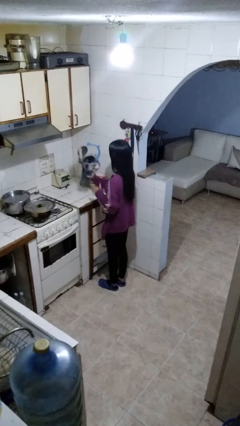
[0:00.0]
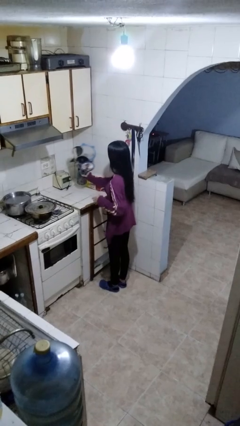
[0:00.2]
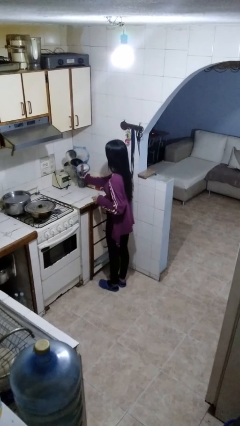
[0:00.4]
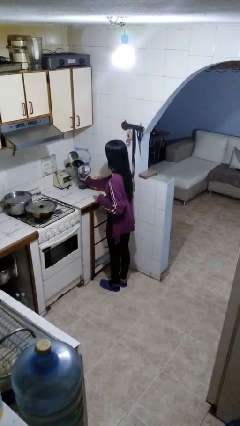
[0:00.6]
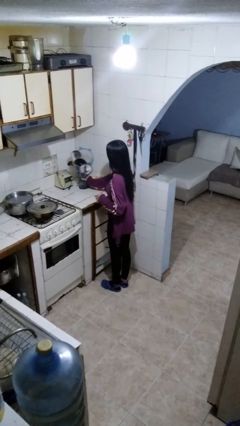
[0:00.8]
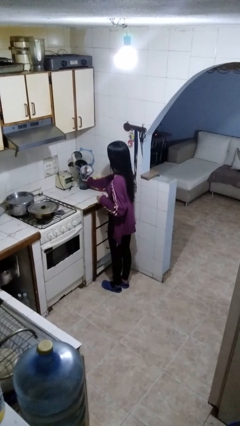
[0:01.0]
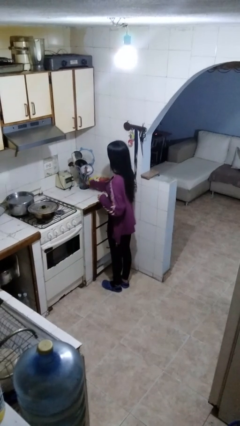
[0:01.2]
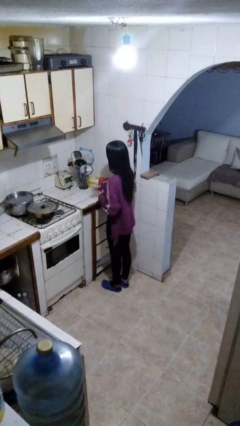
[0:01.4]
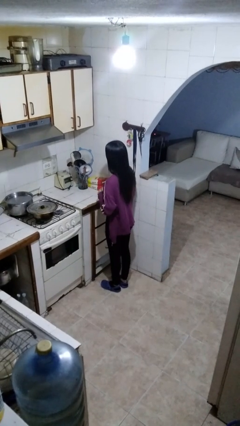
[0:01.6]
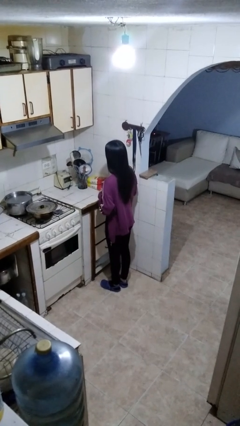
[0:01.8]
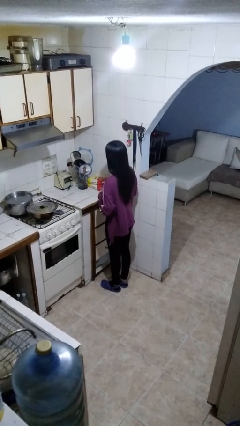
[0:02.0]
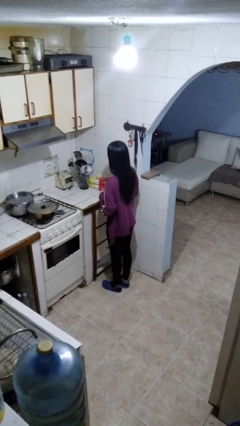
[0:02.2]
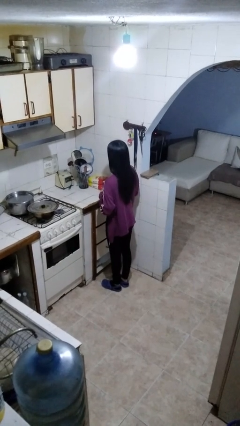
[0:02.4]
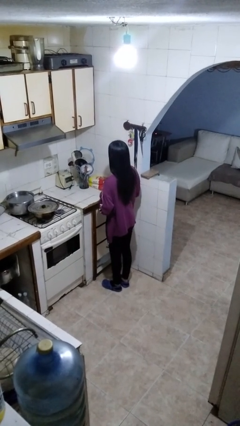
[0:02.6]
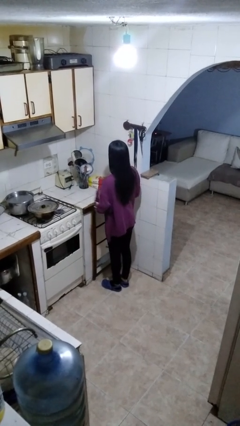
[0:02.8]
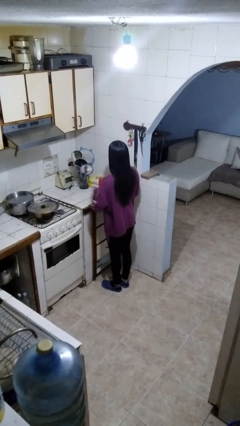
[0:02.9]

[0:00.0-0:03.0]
person picks up object from countertop

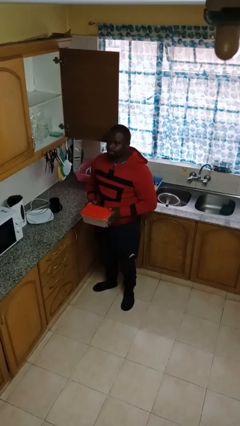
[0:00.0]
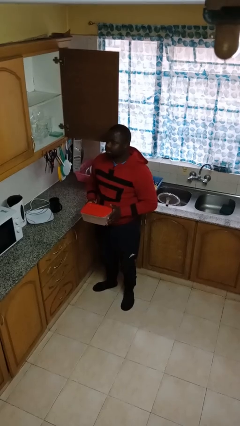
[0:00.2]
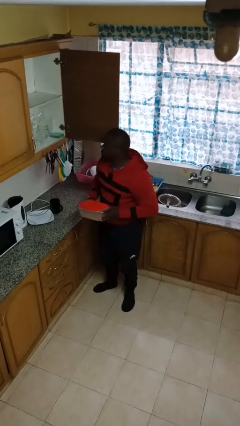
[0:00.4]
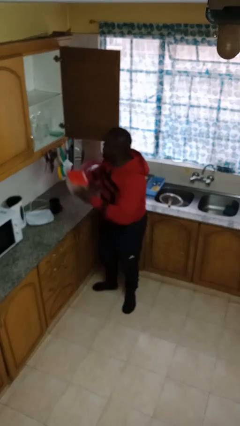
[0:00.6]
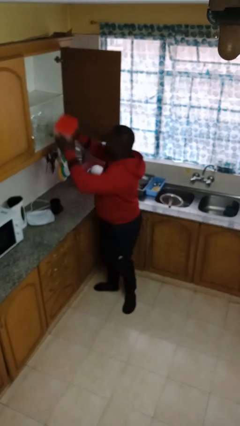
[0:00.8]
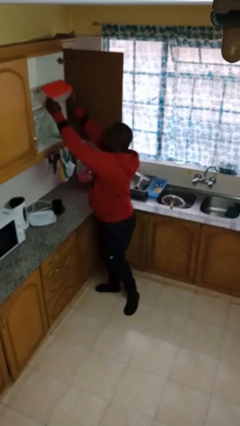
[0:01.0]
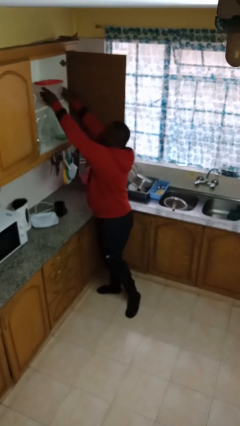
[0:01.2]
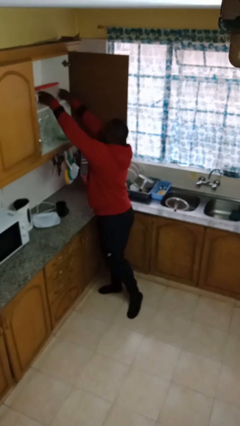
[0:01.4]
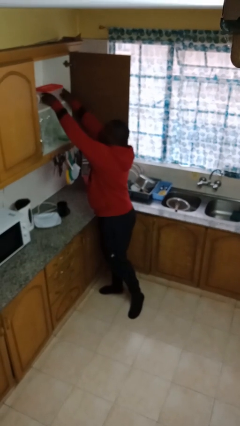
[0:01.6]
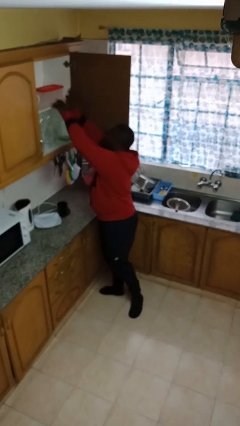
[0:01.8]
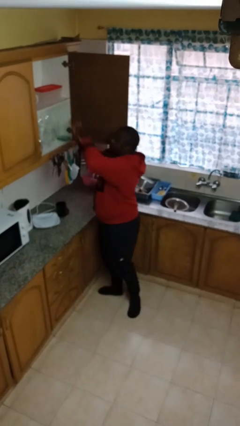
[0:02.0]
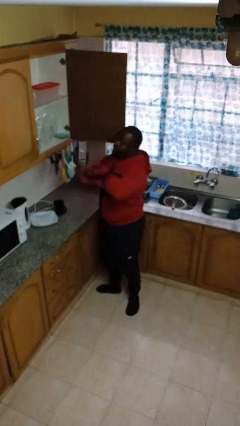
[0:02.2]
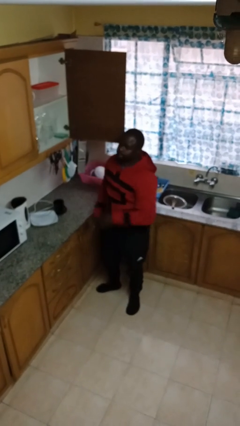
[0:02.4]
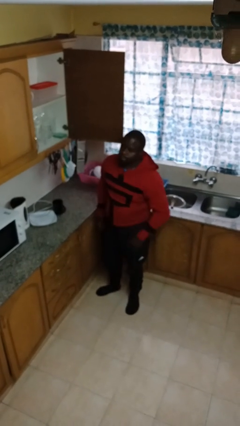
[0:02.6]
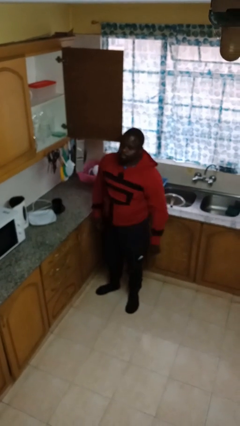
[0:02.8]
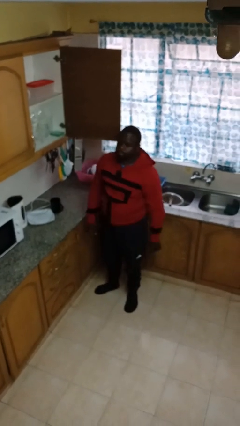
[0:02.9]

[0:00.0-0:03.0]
person puts down object into cabinet

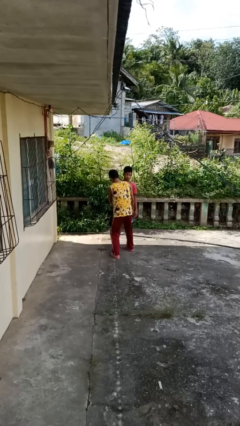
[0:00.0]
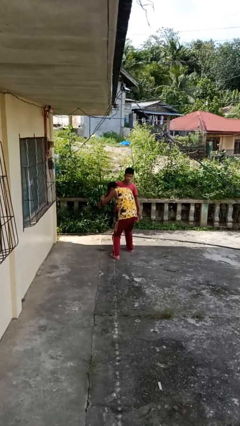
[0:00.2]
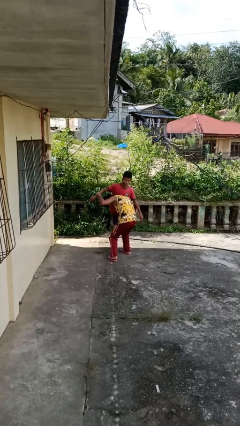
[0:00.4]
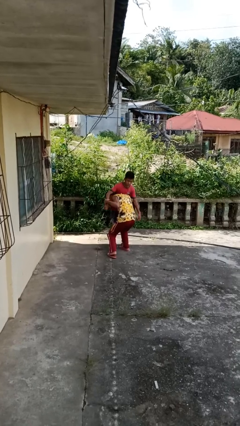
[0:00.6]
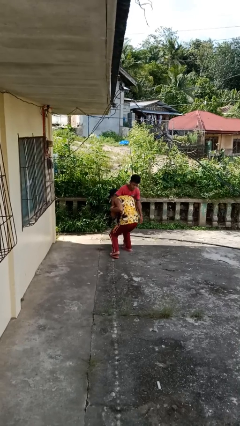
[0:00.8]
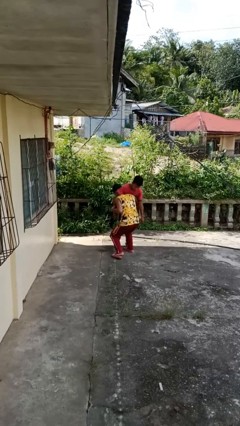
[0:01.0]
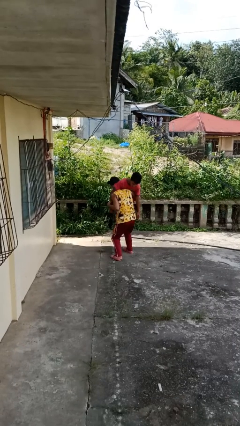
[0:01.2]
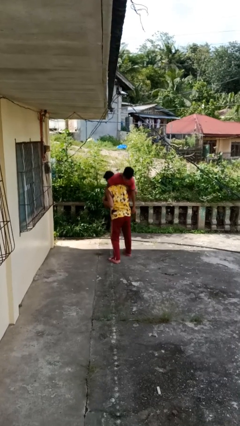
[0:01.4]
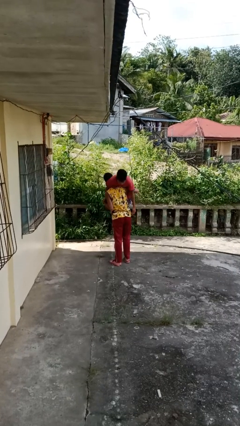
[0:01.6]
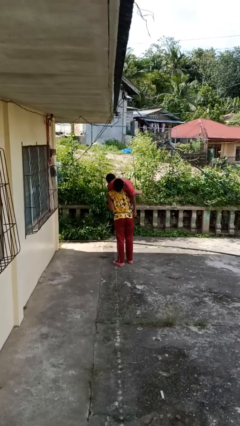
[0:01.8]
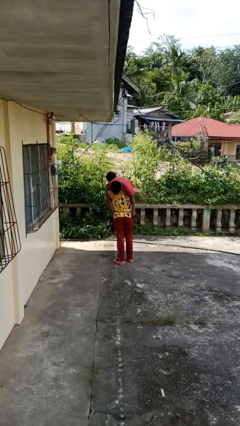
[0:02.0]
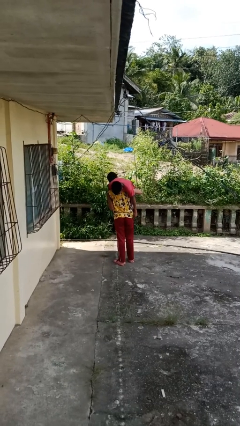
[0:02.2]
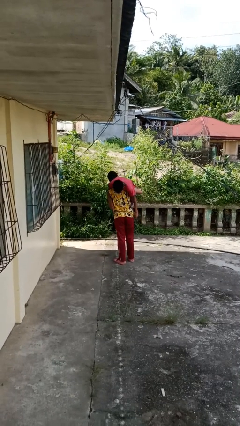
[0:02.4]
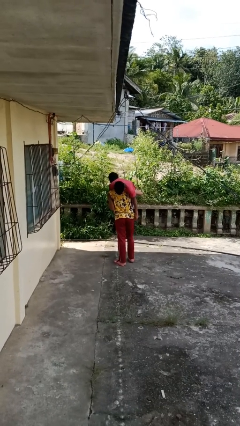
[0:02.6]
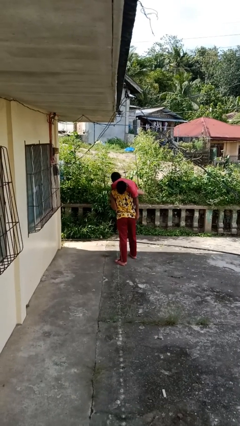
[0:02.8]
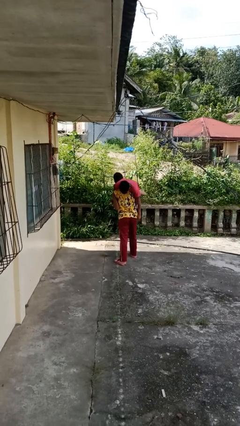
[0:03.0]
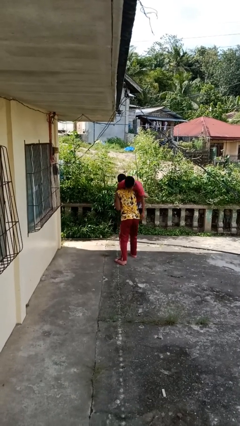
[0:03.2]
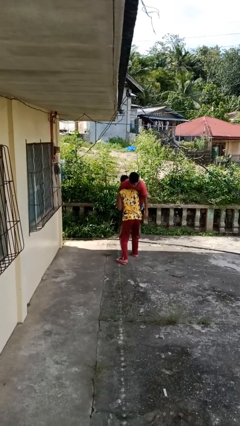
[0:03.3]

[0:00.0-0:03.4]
person carries person over shoulder

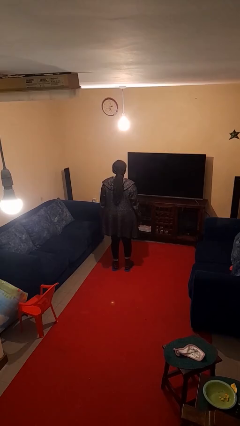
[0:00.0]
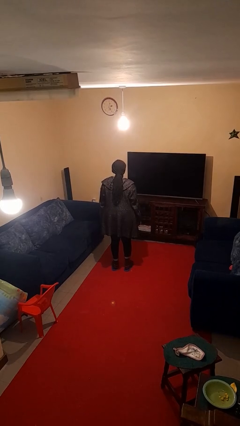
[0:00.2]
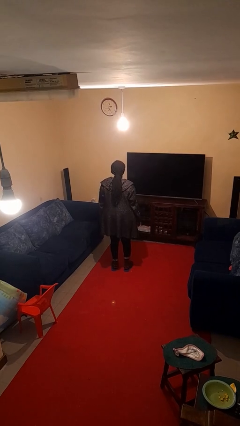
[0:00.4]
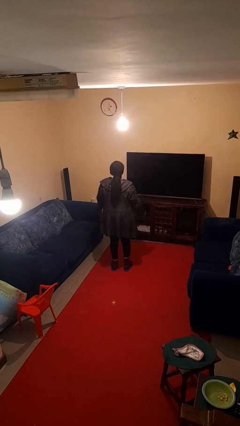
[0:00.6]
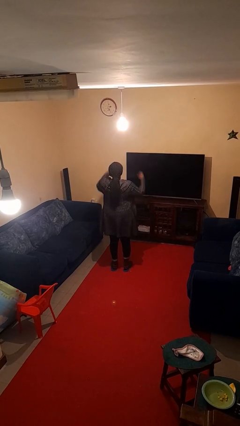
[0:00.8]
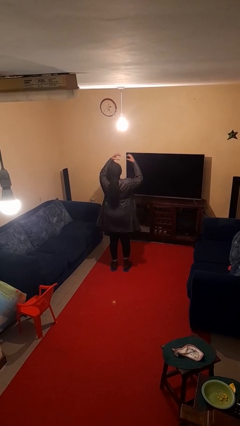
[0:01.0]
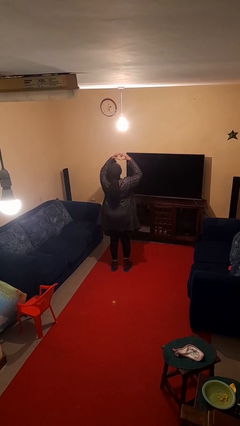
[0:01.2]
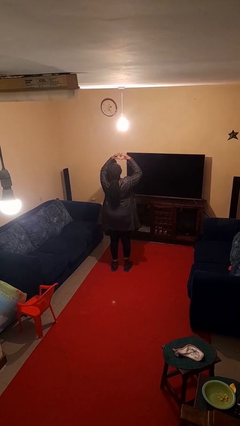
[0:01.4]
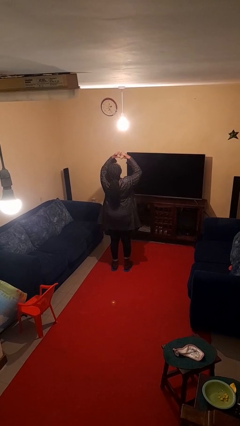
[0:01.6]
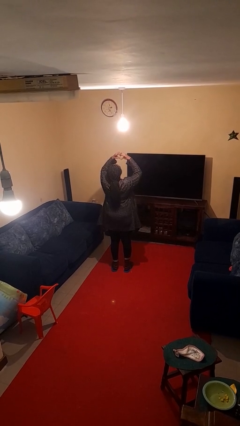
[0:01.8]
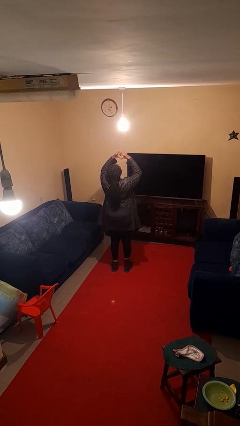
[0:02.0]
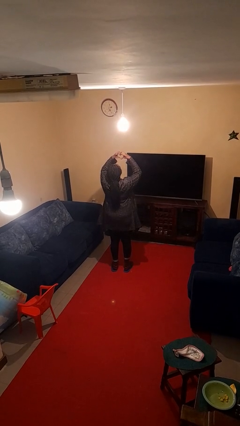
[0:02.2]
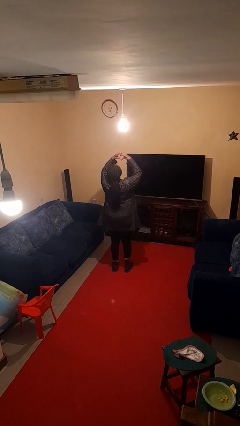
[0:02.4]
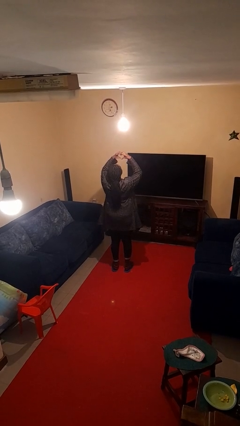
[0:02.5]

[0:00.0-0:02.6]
person gestures heart

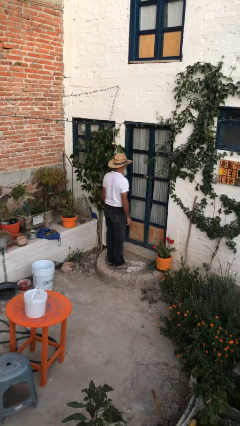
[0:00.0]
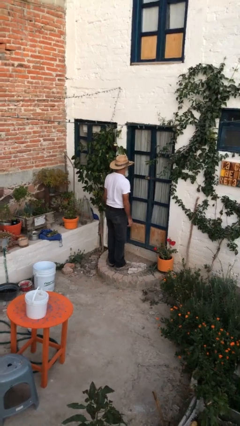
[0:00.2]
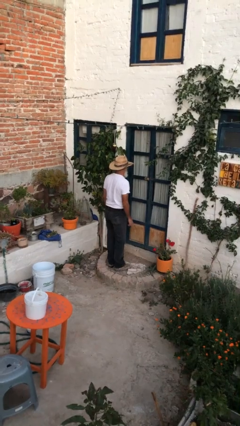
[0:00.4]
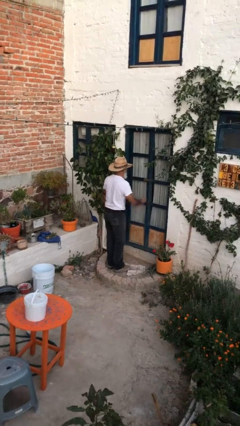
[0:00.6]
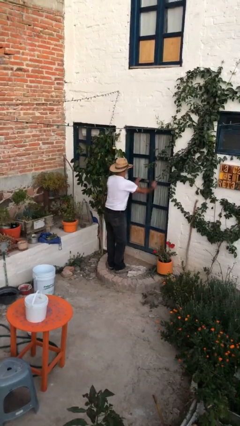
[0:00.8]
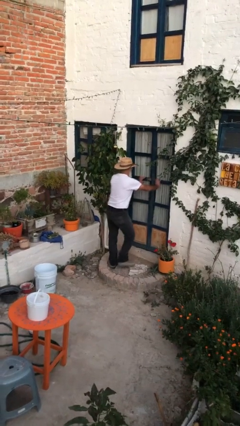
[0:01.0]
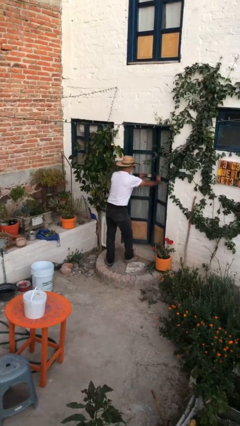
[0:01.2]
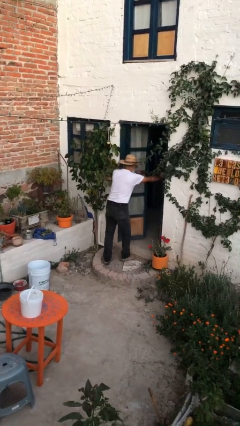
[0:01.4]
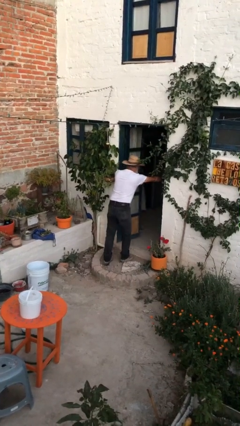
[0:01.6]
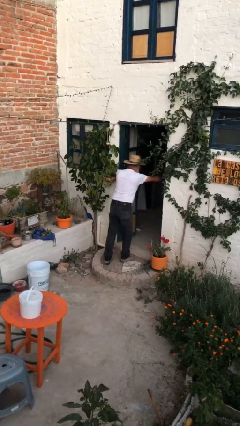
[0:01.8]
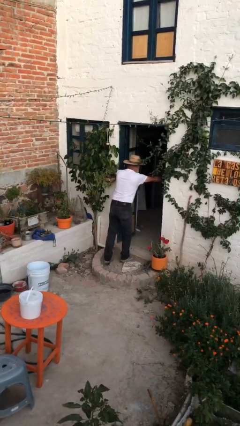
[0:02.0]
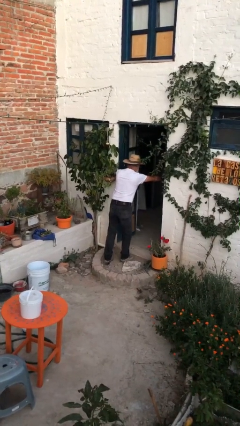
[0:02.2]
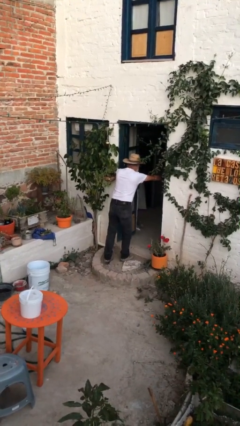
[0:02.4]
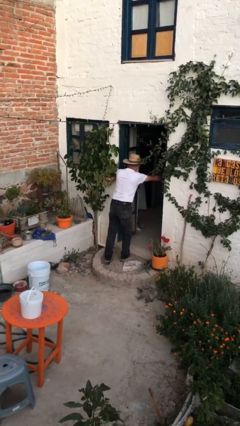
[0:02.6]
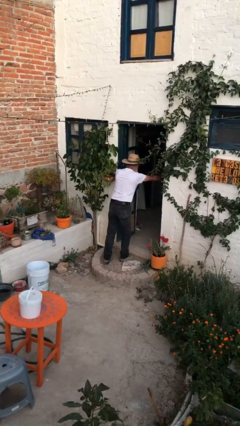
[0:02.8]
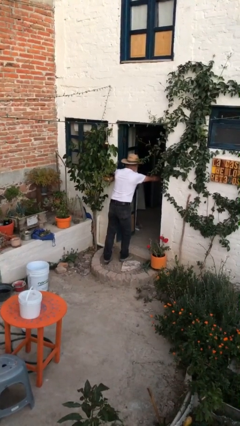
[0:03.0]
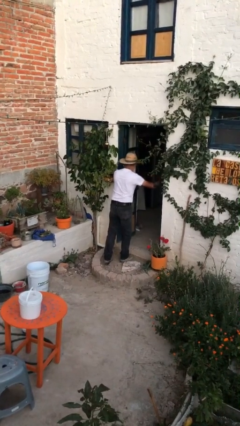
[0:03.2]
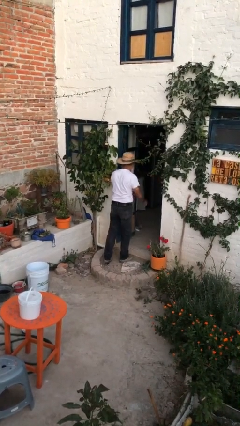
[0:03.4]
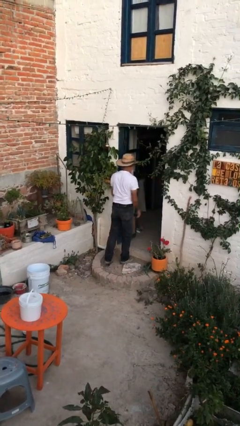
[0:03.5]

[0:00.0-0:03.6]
person opens facility door

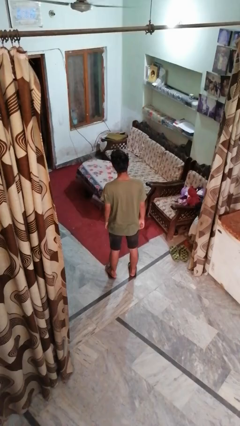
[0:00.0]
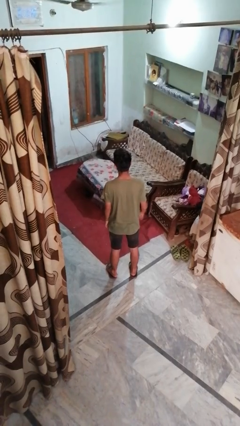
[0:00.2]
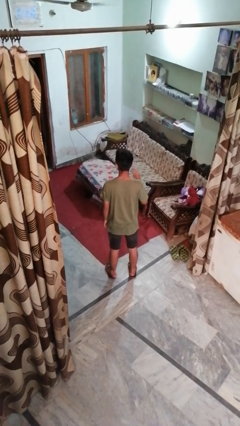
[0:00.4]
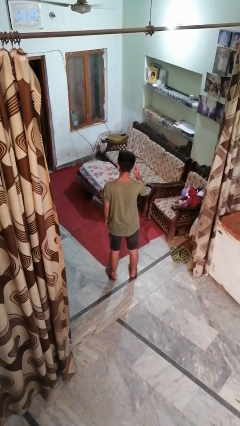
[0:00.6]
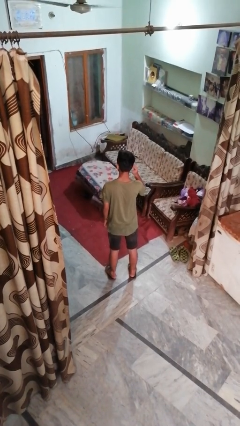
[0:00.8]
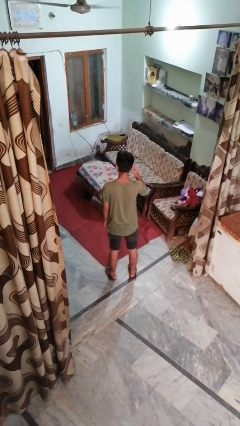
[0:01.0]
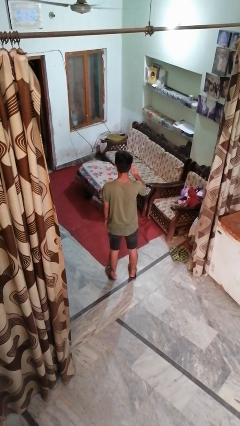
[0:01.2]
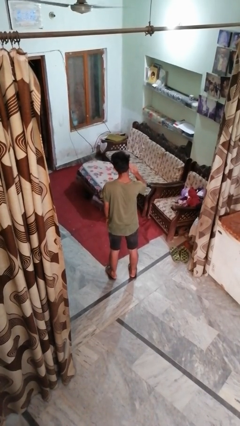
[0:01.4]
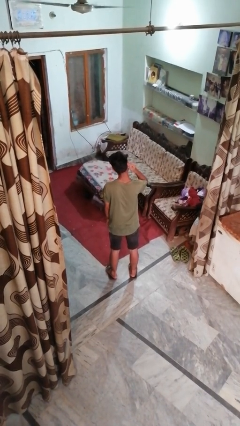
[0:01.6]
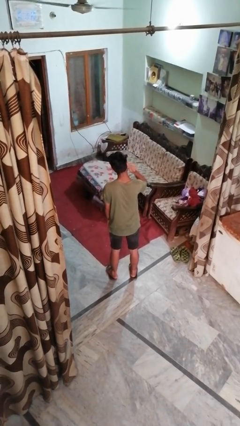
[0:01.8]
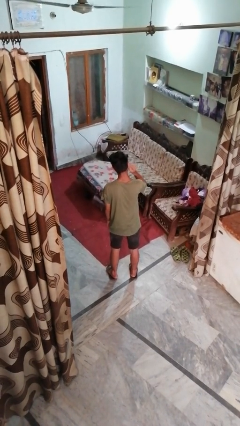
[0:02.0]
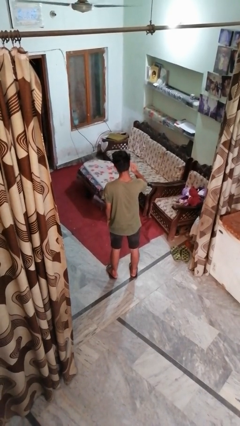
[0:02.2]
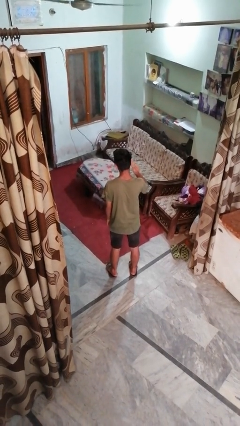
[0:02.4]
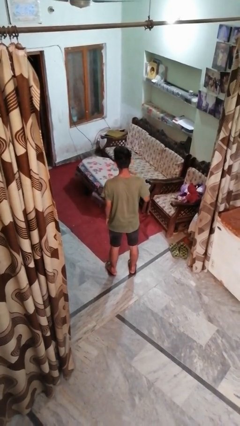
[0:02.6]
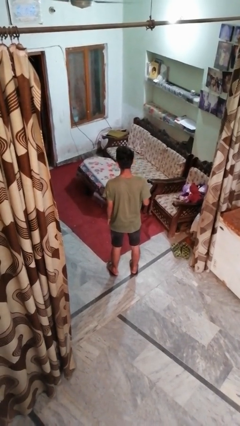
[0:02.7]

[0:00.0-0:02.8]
person touches earlobe
